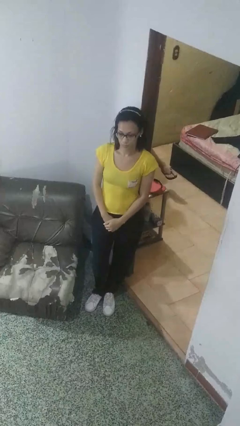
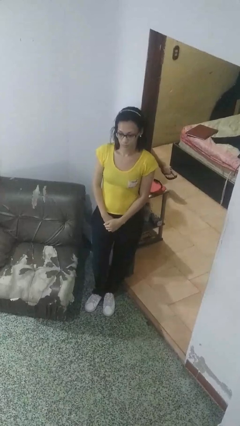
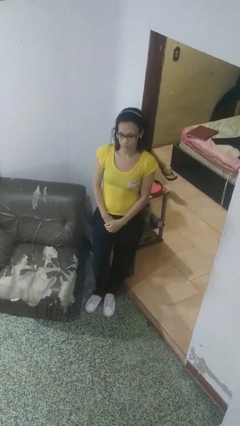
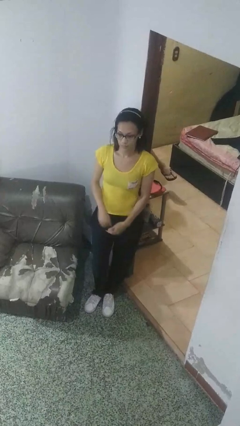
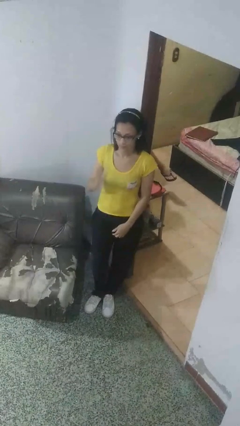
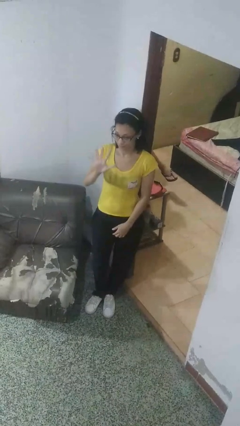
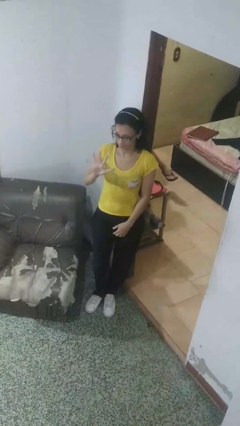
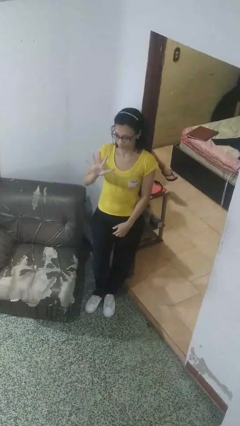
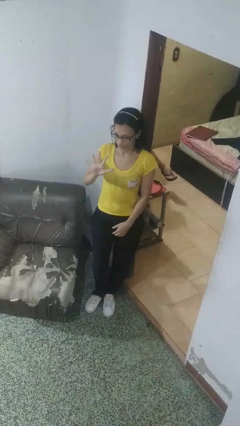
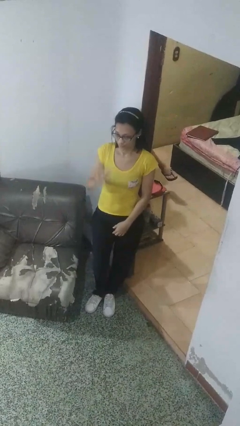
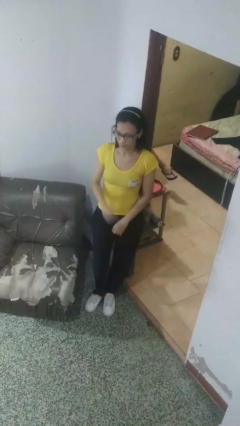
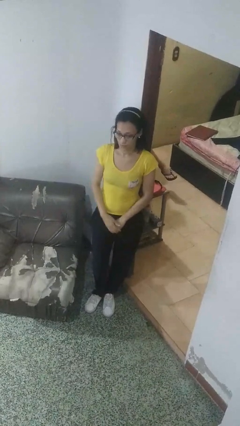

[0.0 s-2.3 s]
person gestures number five

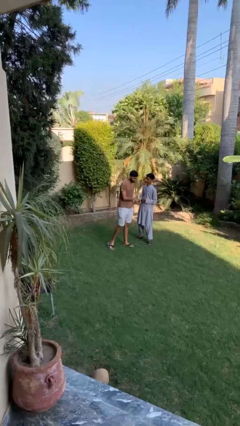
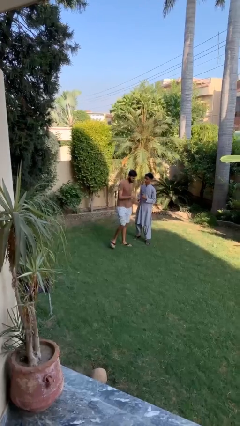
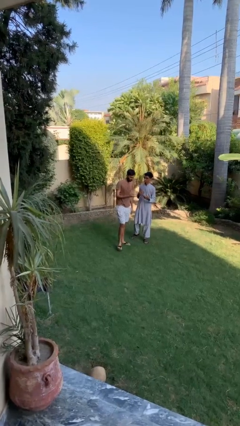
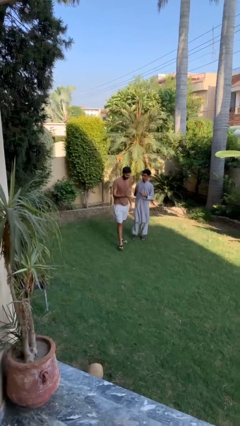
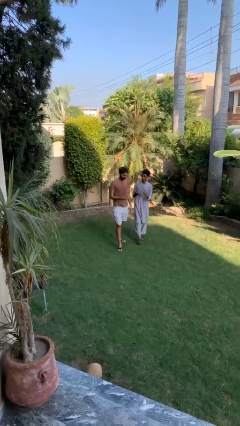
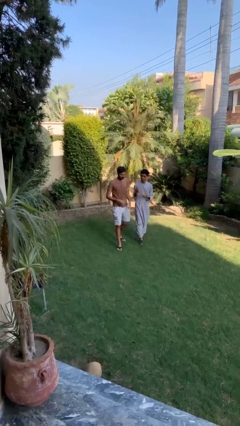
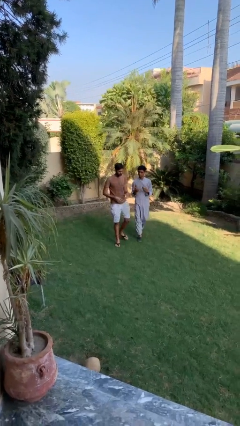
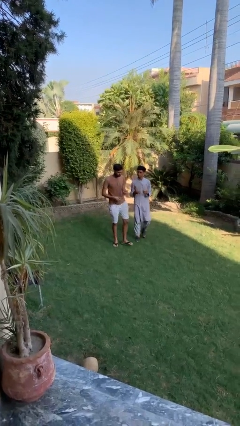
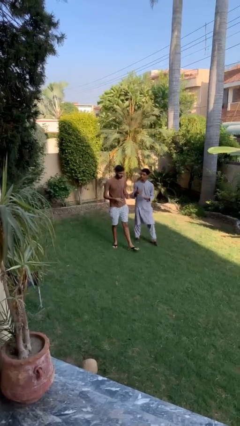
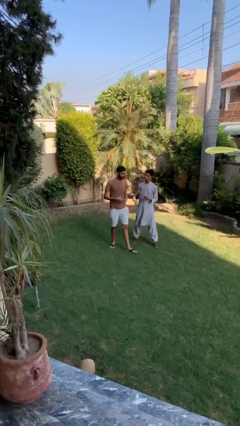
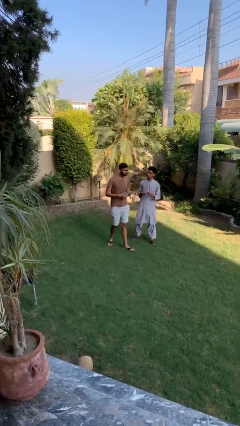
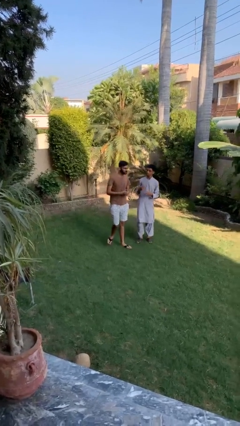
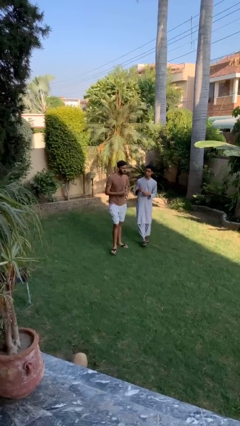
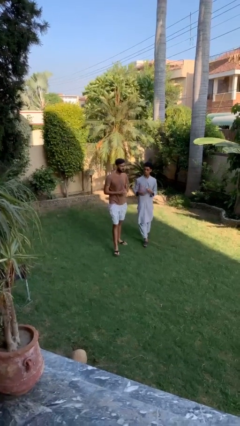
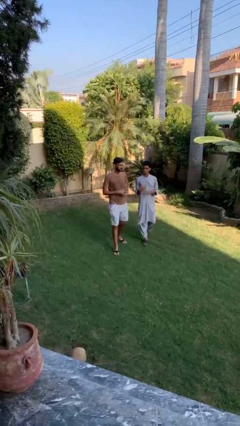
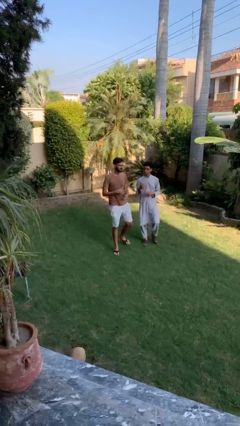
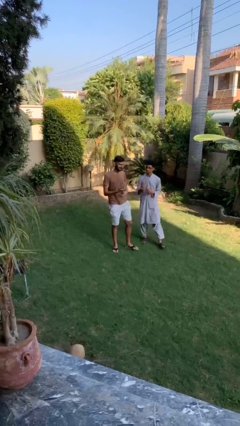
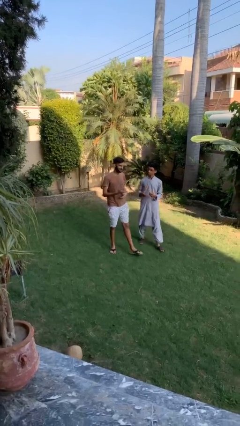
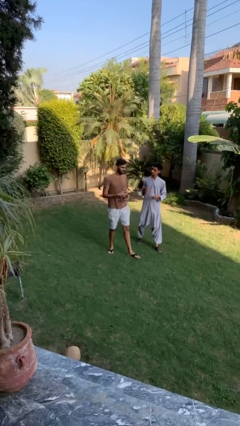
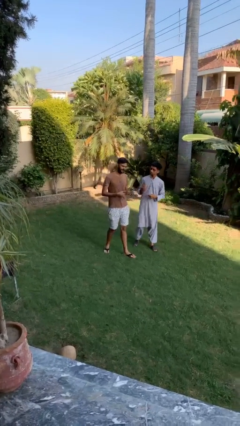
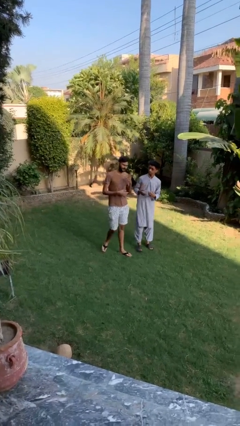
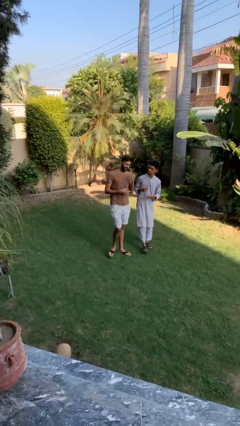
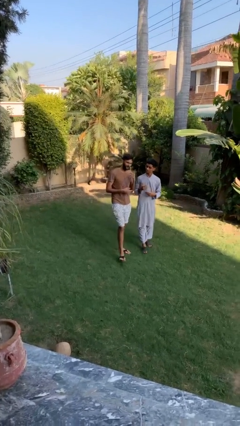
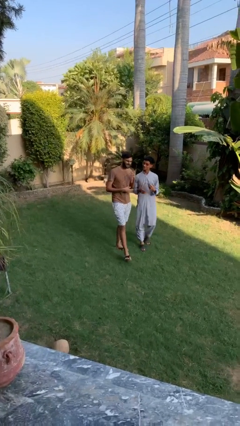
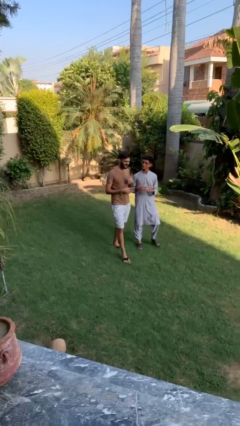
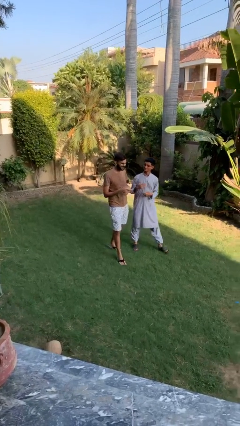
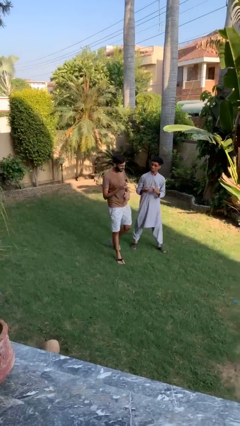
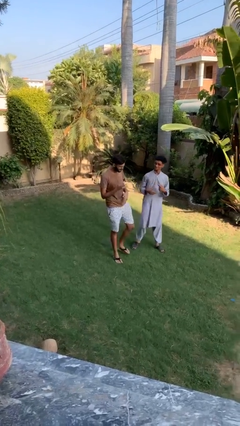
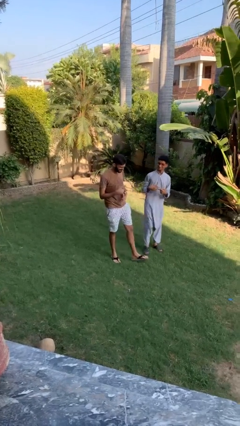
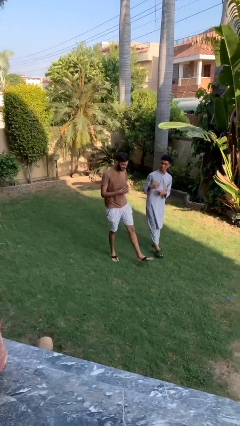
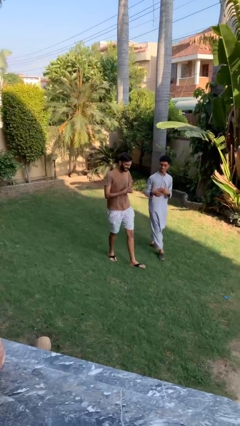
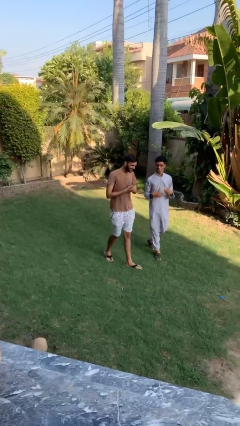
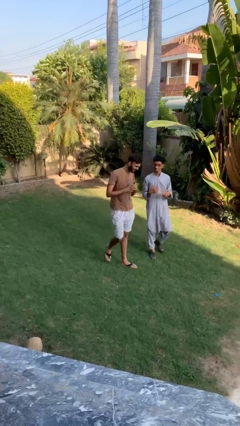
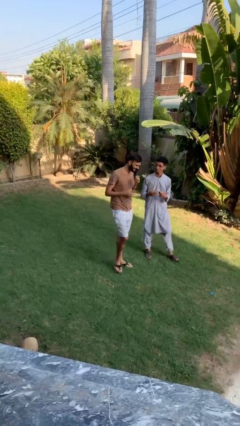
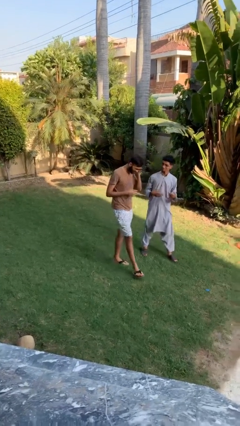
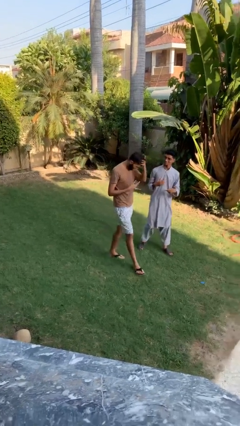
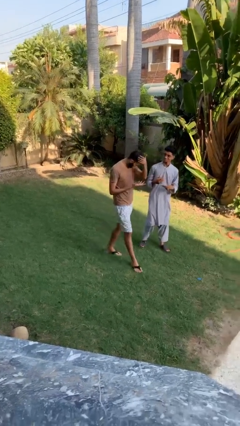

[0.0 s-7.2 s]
person talks to person

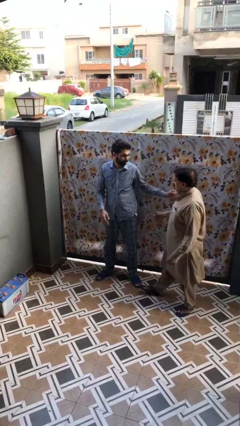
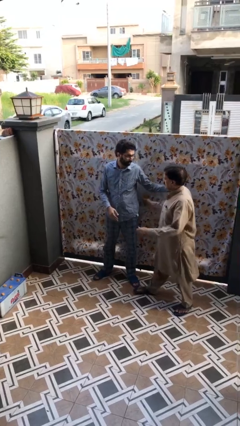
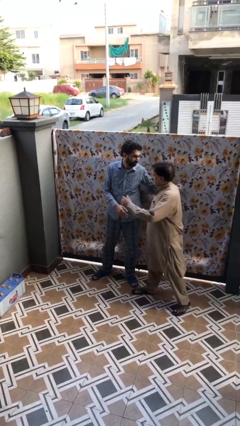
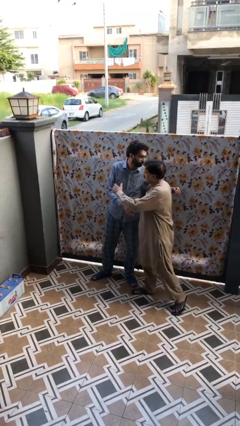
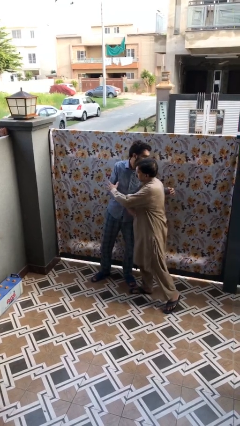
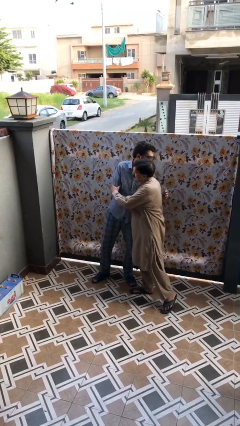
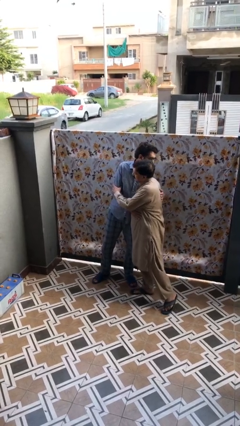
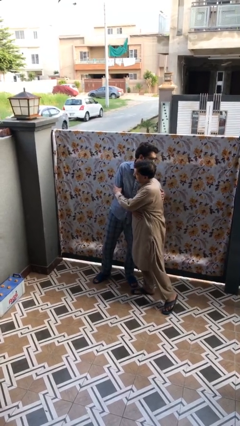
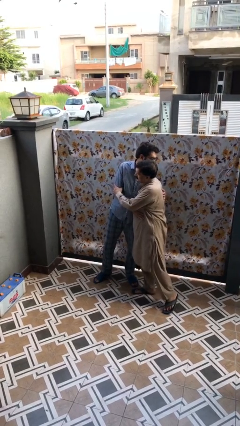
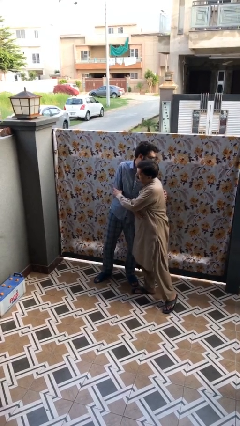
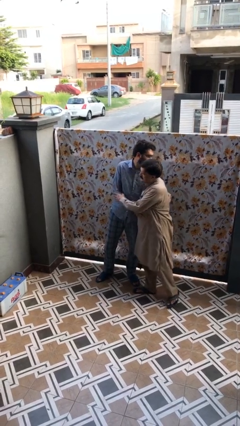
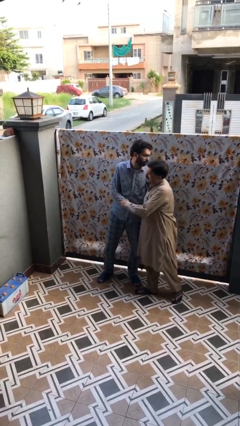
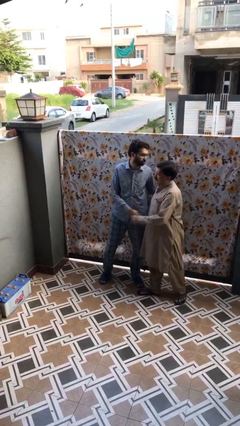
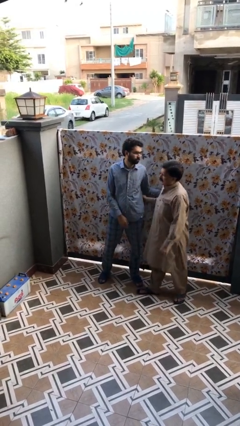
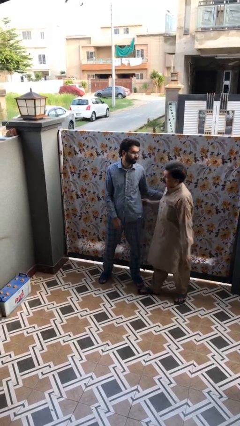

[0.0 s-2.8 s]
person embraces person

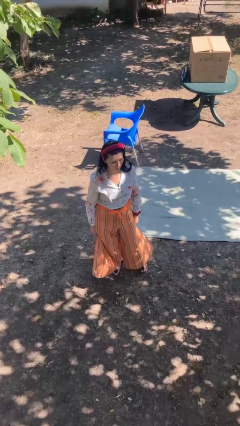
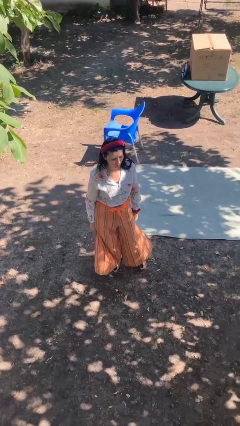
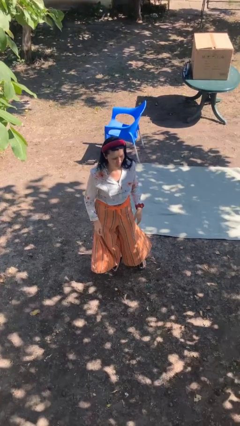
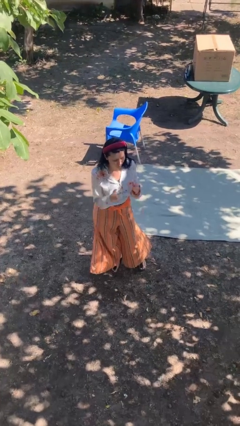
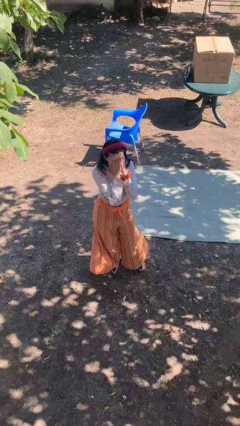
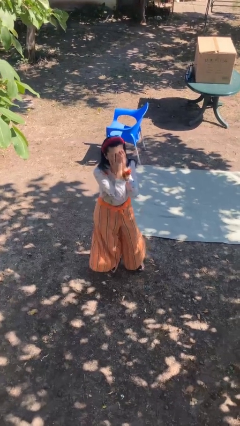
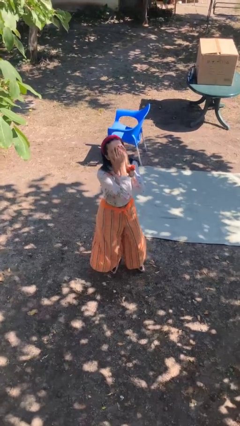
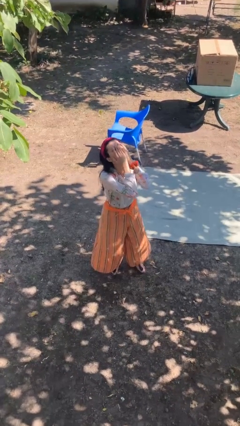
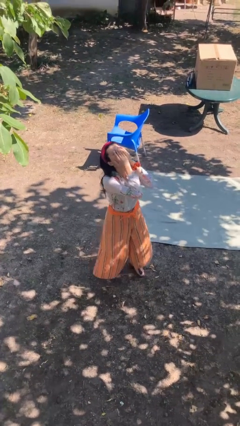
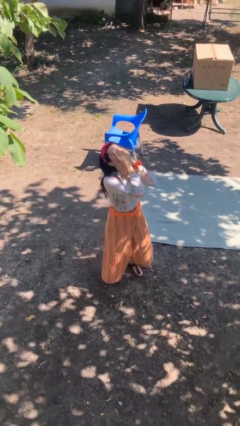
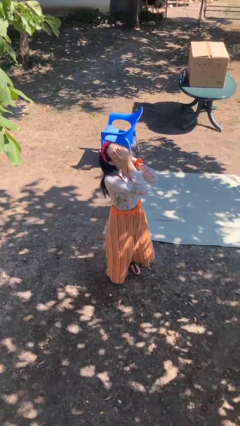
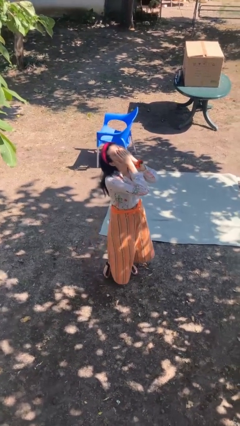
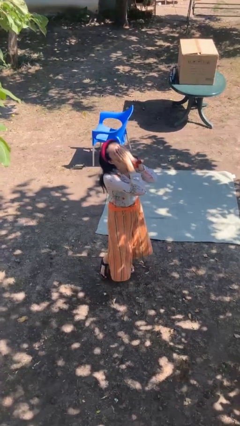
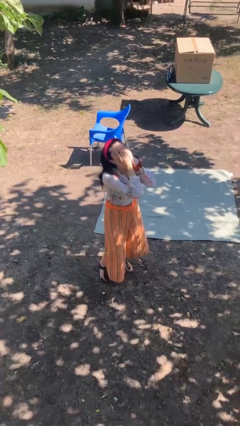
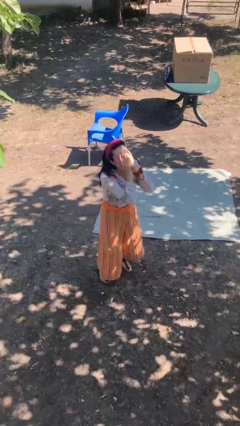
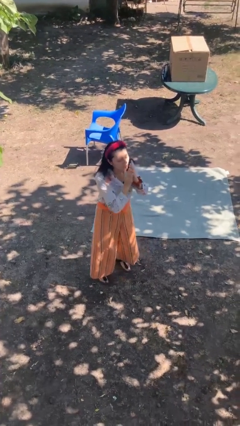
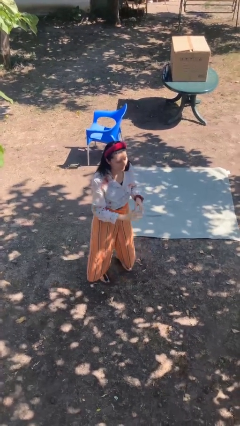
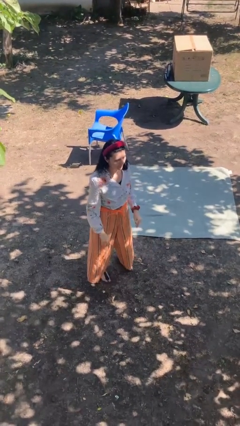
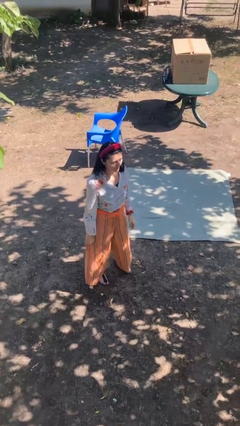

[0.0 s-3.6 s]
person covers face with hands

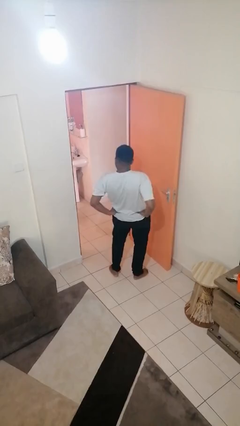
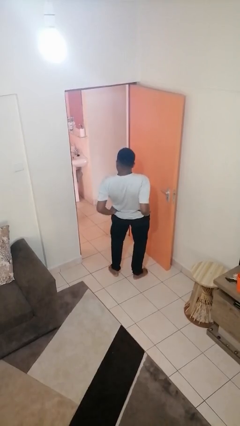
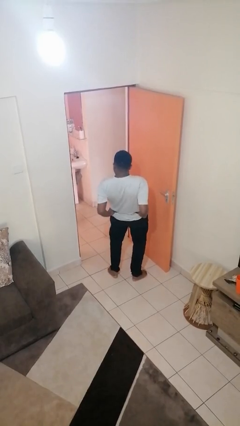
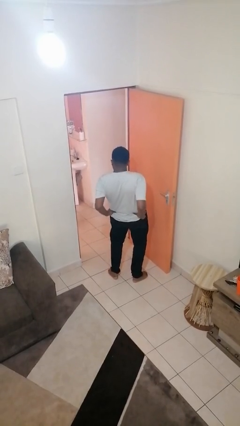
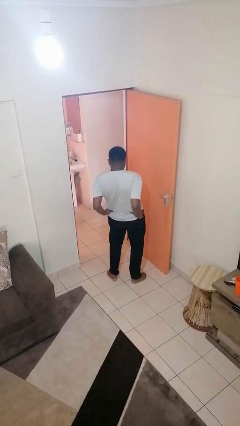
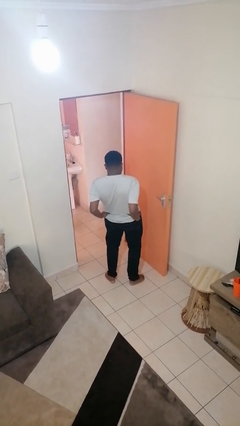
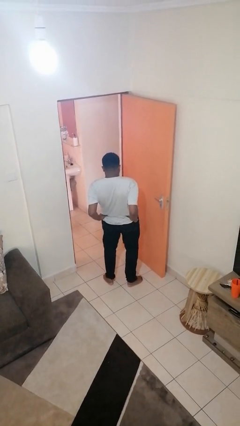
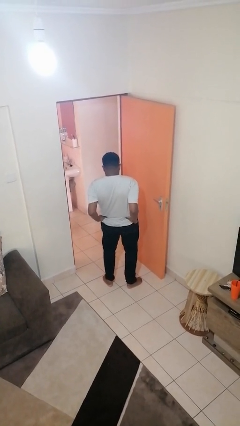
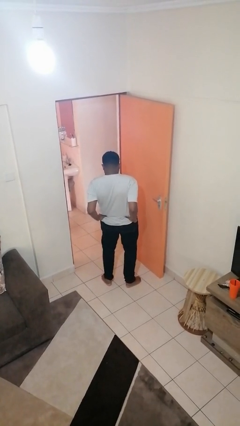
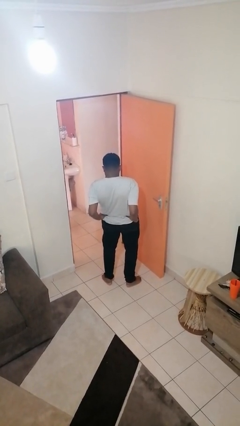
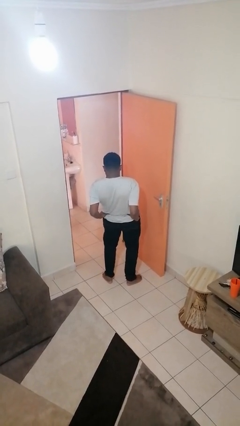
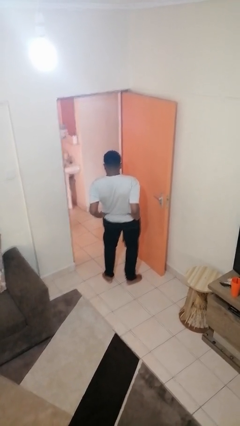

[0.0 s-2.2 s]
person stretches back
